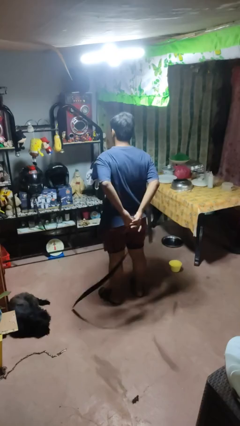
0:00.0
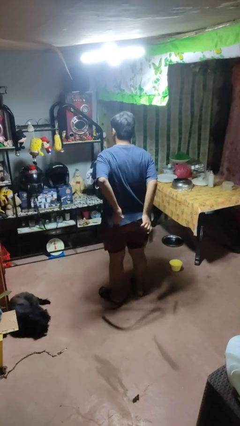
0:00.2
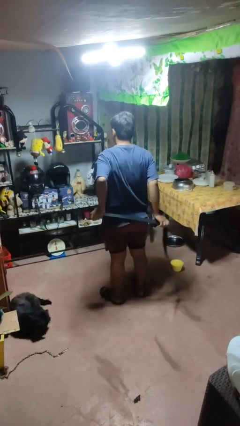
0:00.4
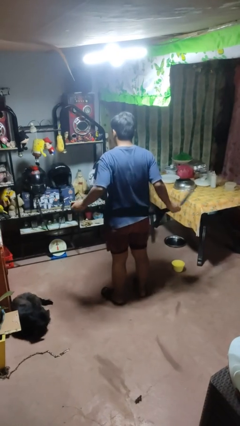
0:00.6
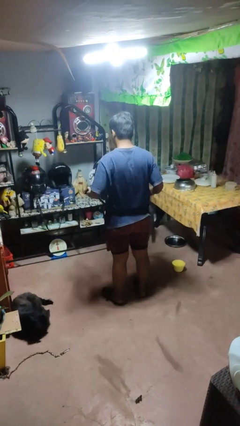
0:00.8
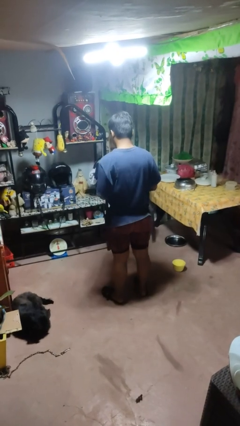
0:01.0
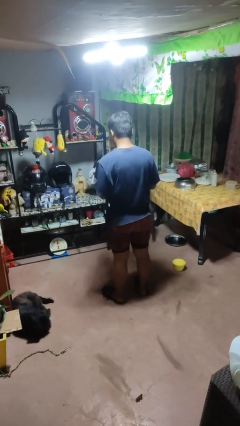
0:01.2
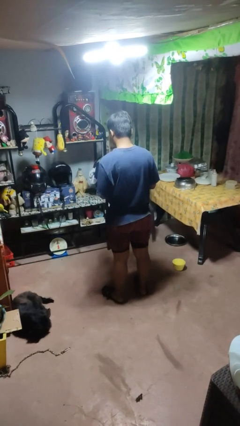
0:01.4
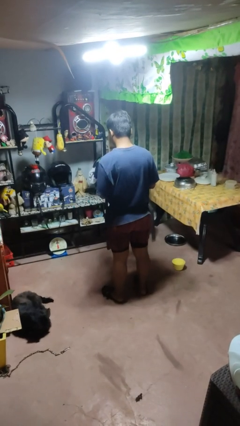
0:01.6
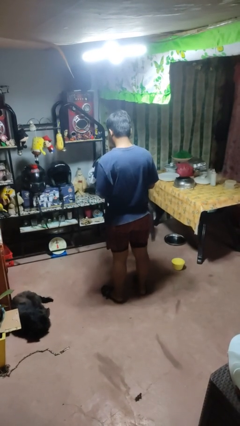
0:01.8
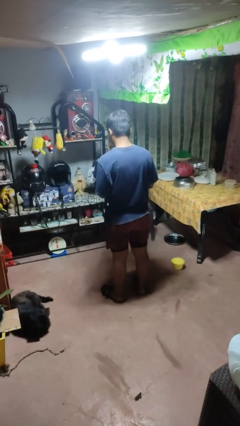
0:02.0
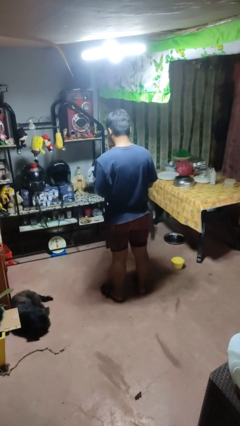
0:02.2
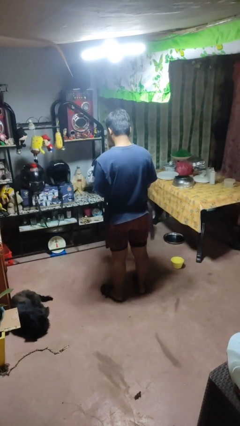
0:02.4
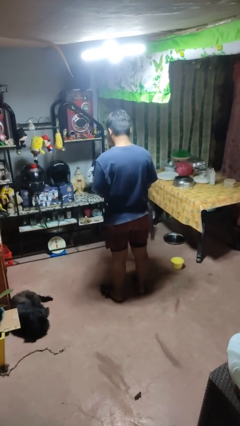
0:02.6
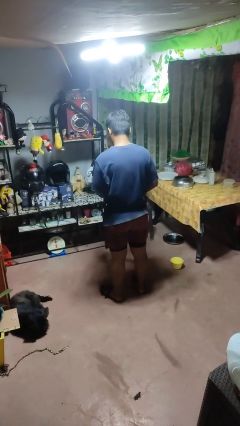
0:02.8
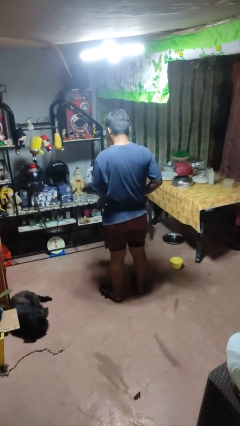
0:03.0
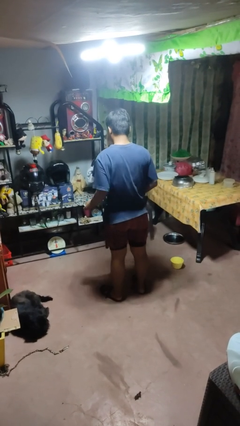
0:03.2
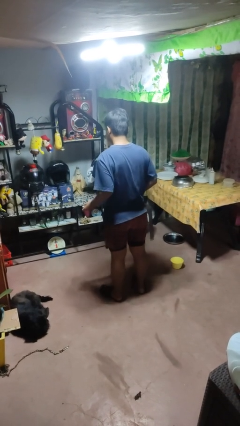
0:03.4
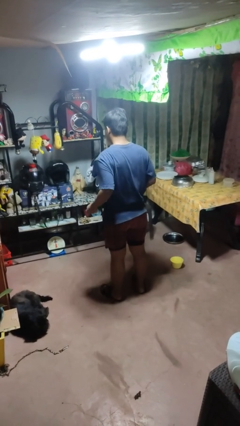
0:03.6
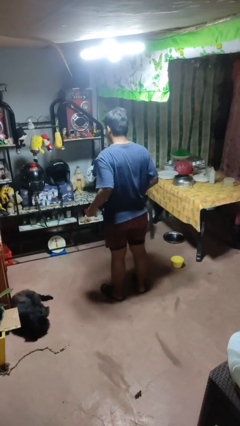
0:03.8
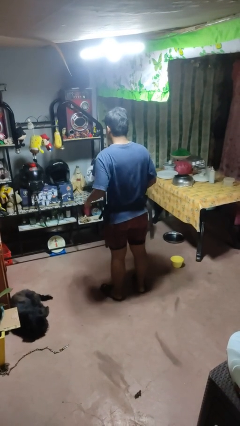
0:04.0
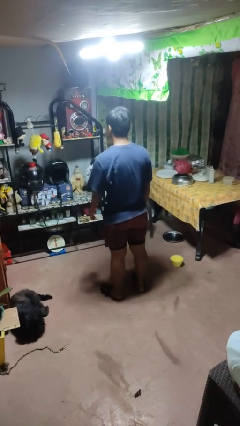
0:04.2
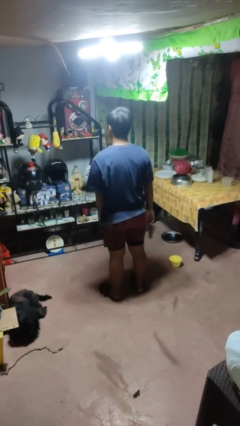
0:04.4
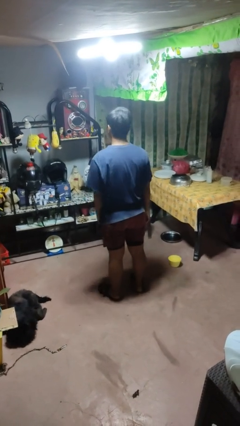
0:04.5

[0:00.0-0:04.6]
person puts on belt

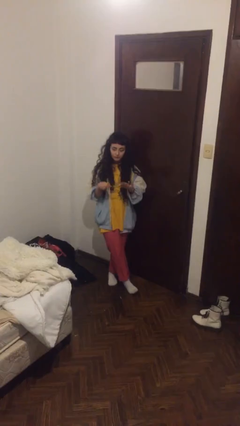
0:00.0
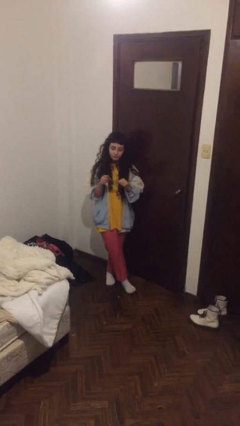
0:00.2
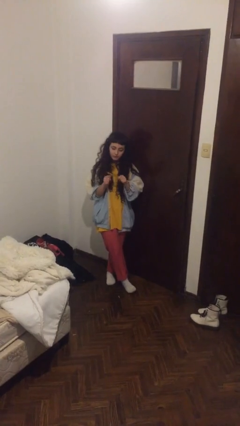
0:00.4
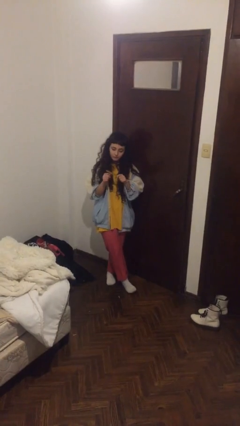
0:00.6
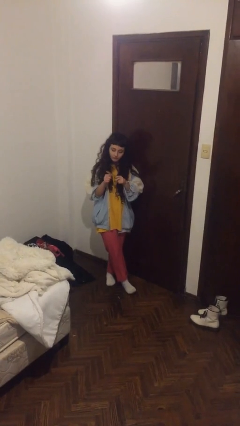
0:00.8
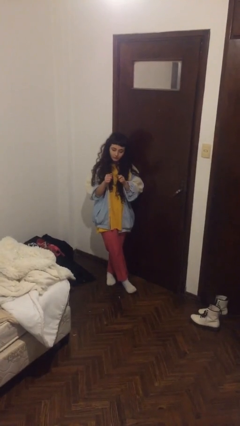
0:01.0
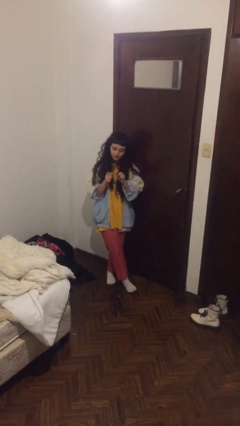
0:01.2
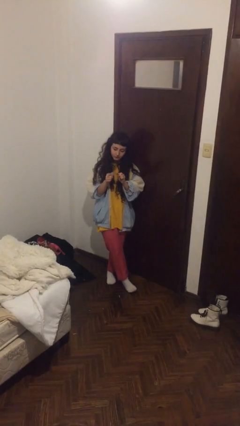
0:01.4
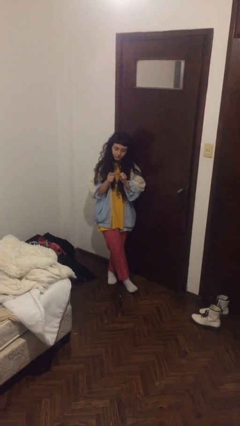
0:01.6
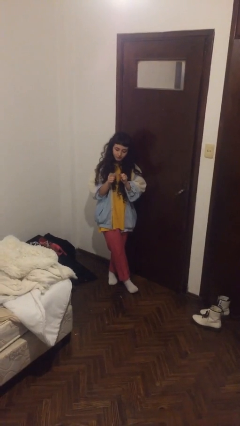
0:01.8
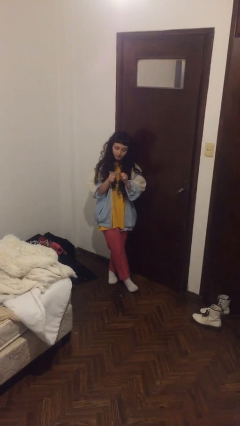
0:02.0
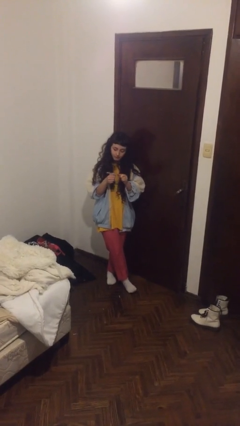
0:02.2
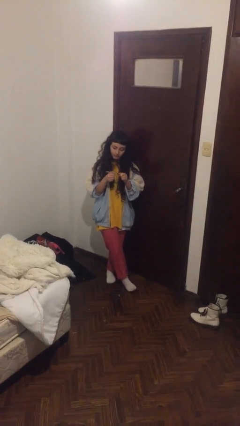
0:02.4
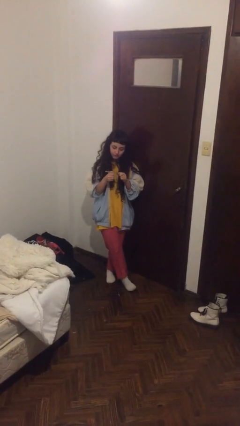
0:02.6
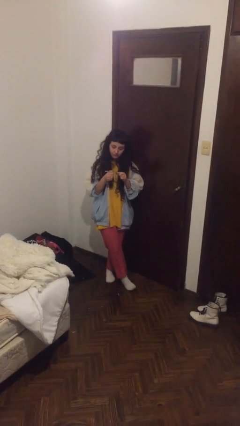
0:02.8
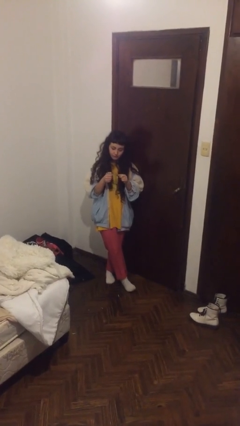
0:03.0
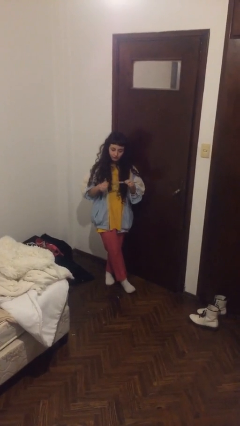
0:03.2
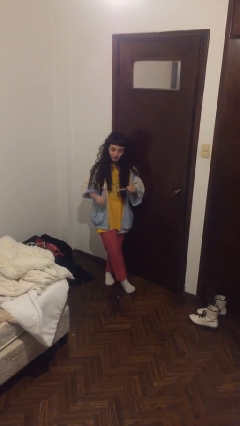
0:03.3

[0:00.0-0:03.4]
person files fingernails

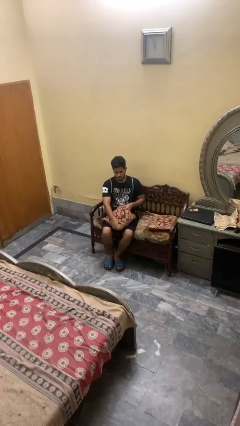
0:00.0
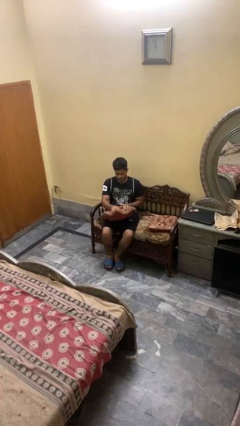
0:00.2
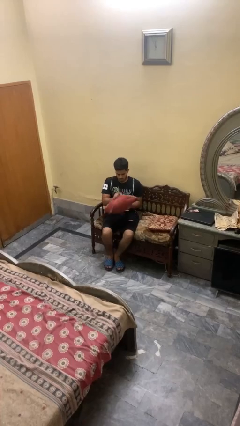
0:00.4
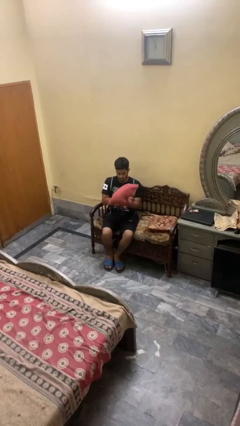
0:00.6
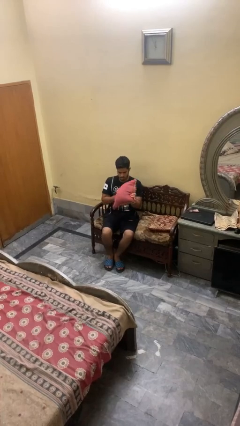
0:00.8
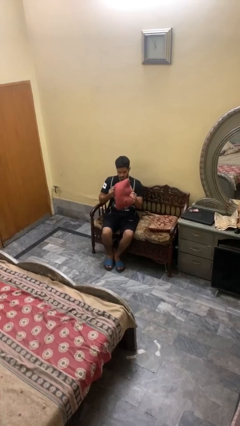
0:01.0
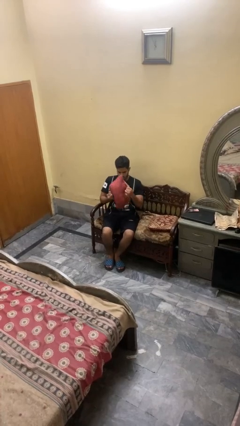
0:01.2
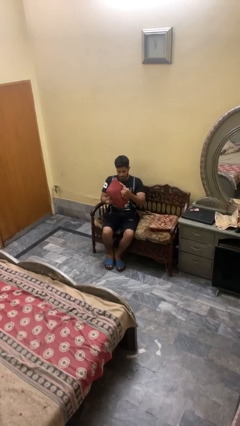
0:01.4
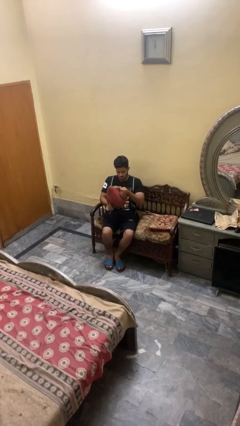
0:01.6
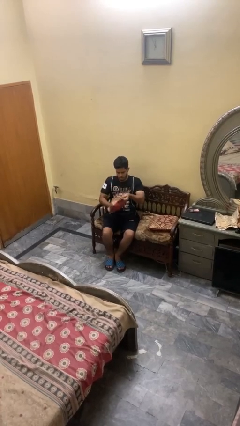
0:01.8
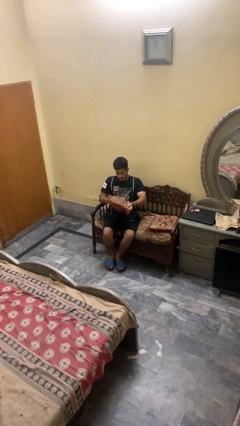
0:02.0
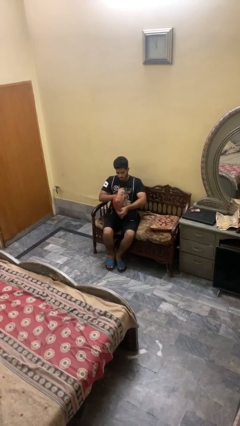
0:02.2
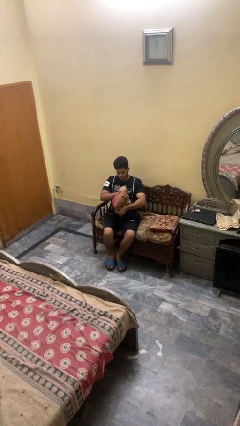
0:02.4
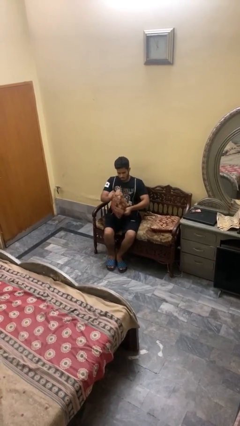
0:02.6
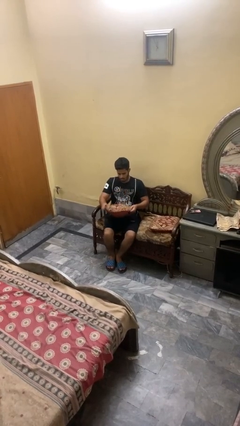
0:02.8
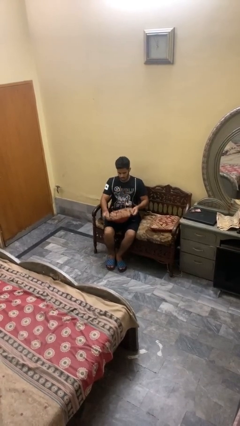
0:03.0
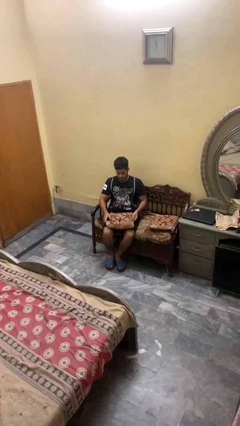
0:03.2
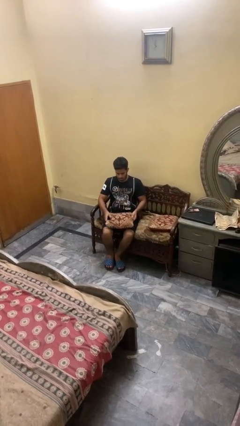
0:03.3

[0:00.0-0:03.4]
person squeezes object

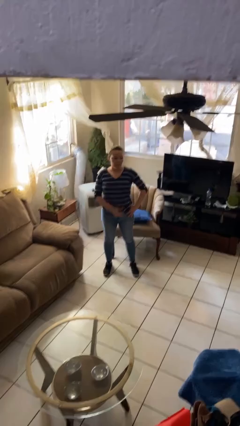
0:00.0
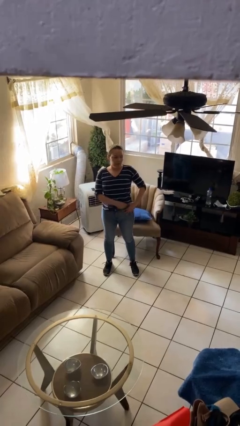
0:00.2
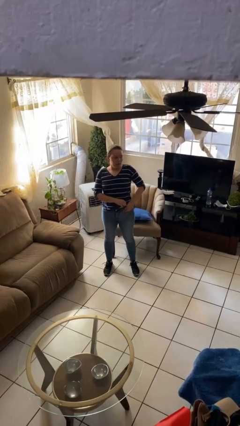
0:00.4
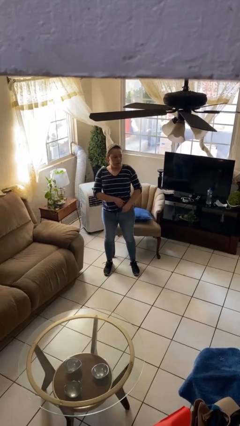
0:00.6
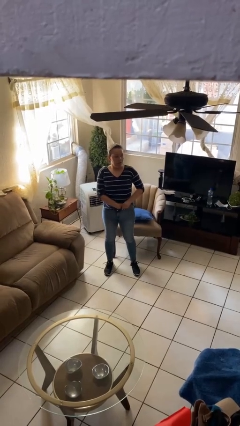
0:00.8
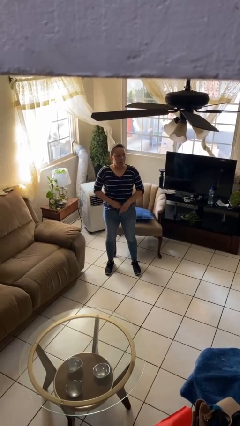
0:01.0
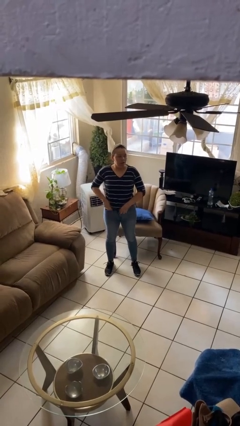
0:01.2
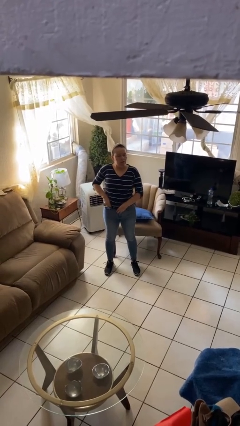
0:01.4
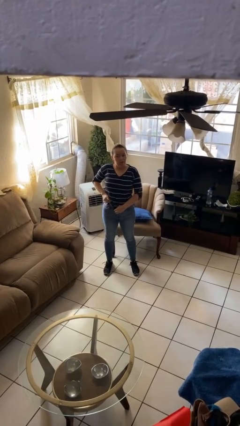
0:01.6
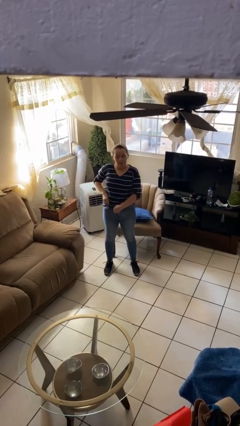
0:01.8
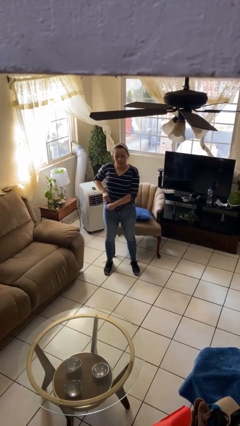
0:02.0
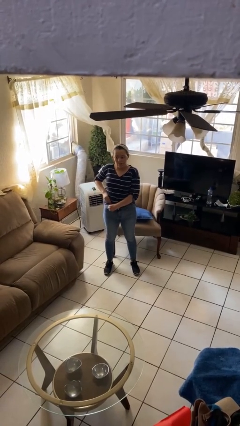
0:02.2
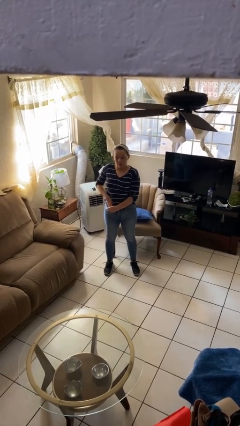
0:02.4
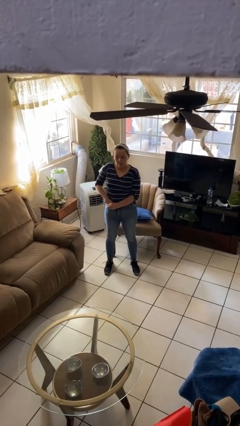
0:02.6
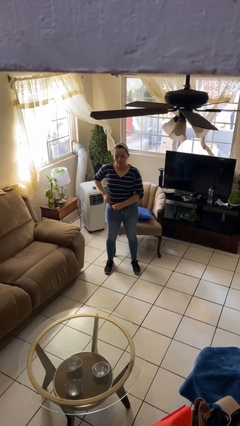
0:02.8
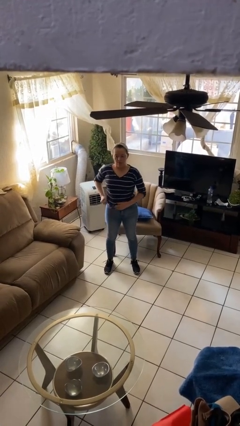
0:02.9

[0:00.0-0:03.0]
person tucks in shirt

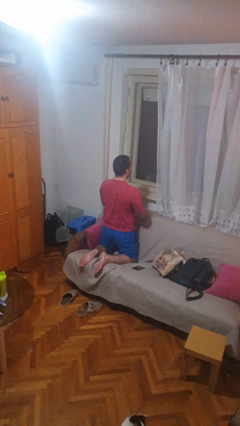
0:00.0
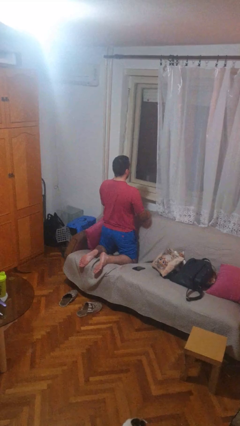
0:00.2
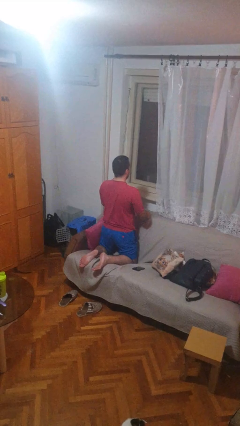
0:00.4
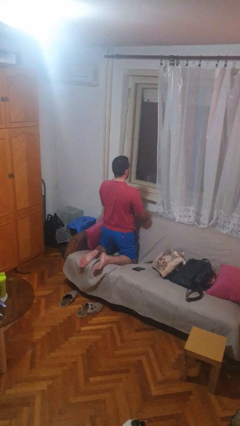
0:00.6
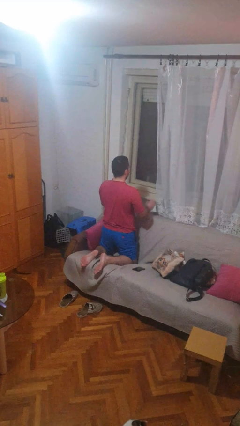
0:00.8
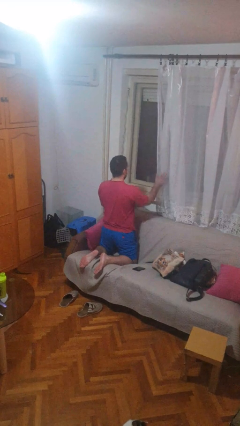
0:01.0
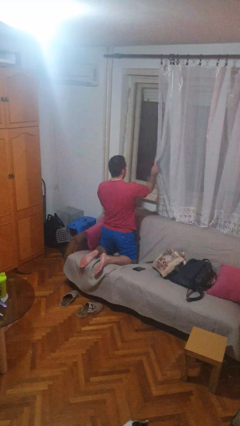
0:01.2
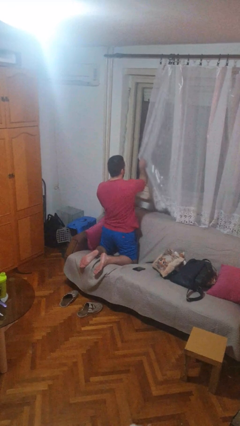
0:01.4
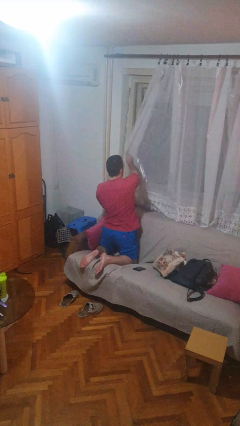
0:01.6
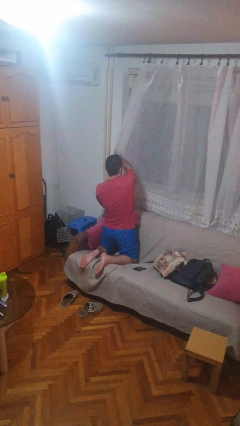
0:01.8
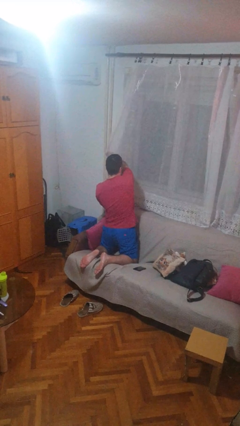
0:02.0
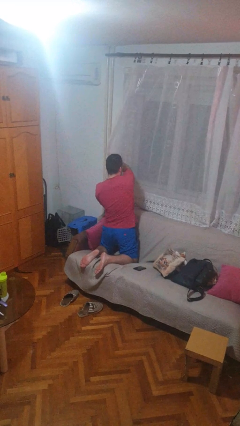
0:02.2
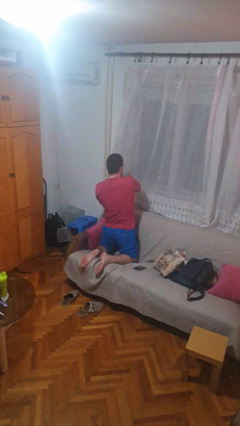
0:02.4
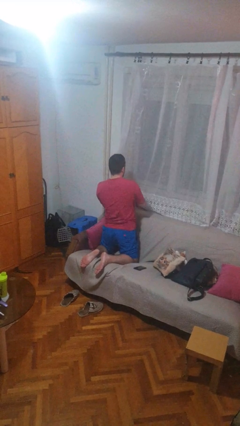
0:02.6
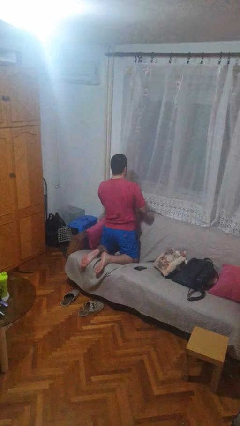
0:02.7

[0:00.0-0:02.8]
person closes curtains

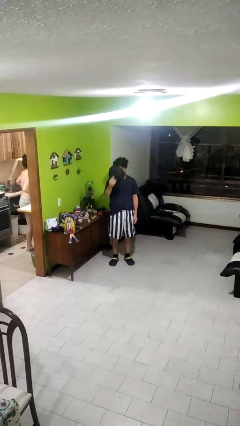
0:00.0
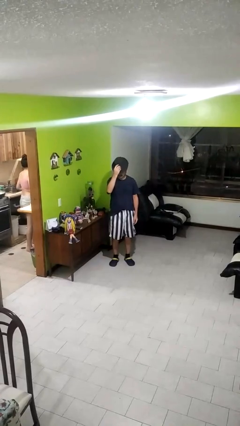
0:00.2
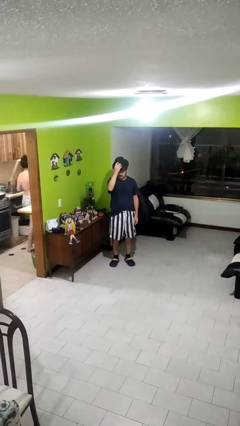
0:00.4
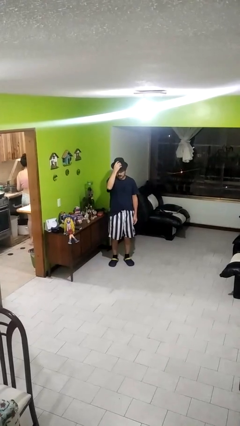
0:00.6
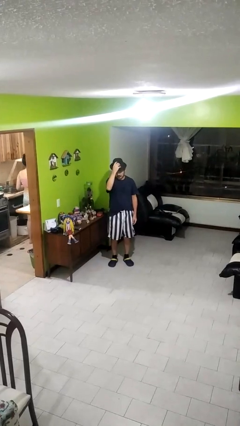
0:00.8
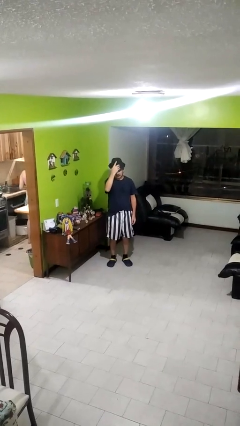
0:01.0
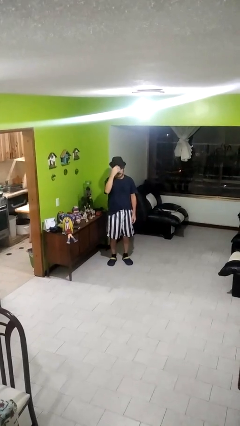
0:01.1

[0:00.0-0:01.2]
person puts on hat
